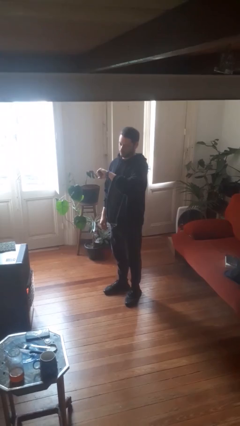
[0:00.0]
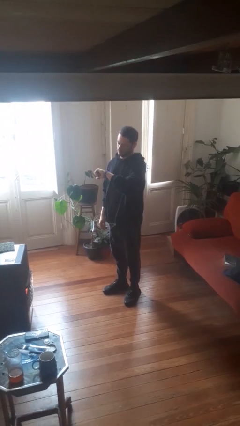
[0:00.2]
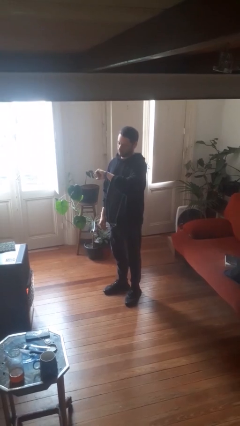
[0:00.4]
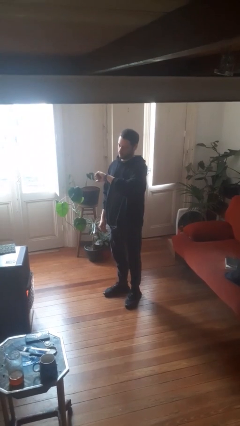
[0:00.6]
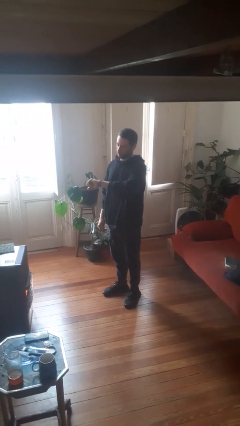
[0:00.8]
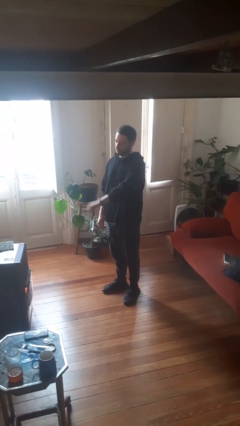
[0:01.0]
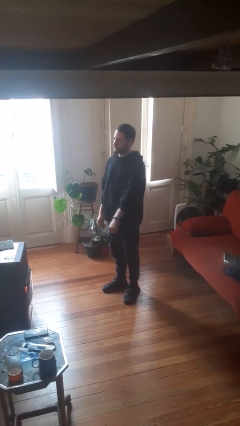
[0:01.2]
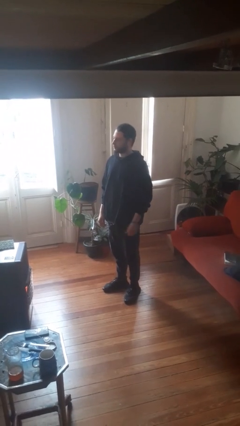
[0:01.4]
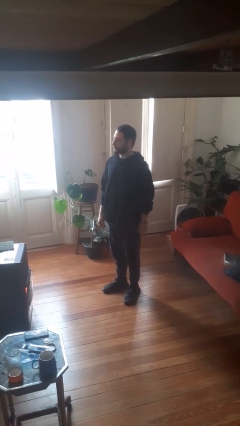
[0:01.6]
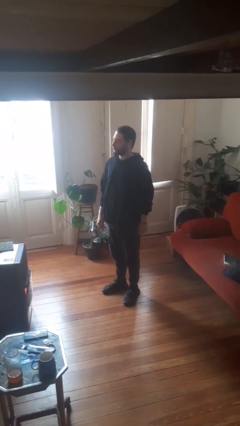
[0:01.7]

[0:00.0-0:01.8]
person looks at wristwatch

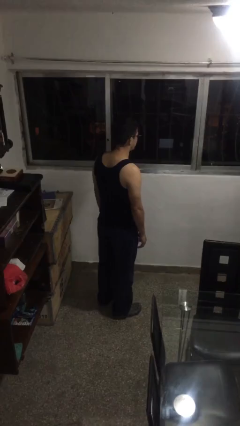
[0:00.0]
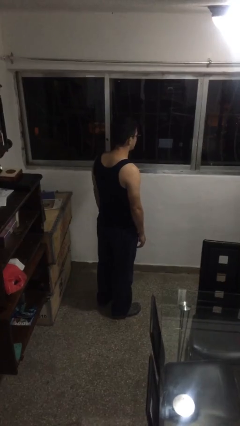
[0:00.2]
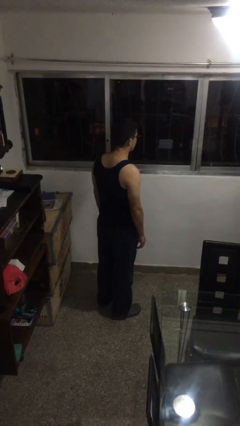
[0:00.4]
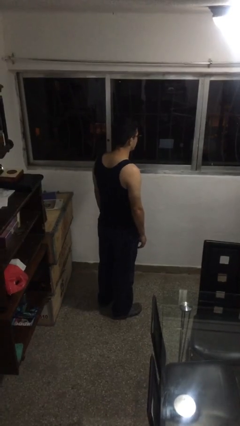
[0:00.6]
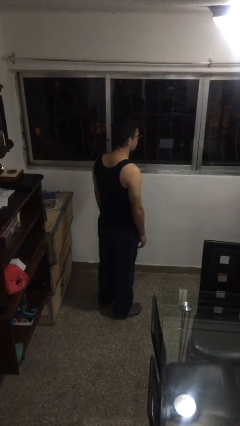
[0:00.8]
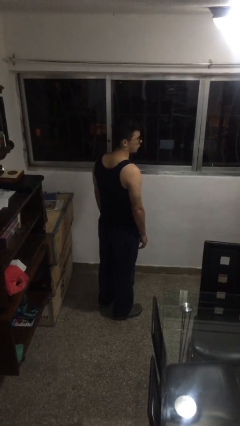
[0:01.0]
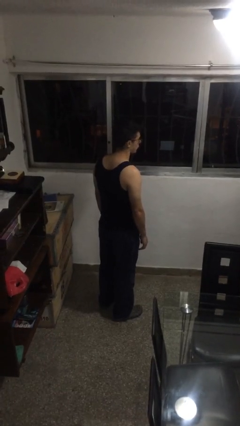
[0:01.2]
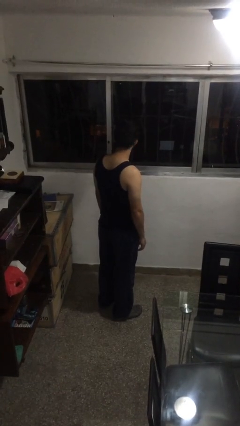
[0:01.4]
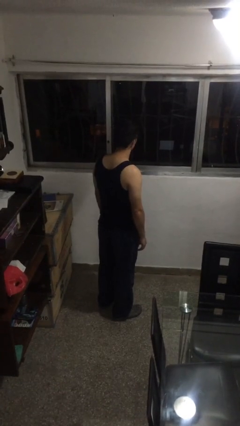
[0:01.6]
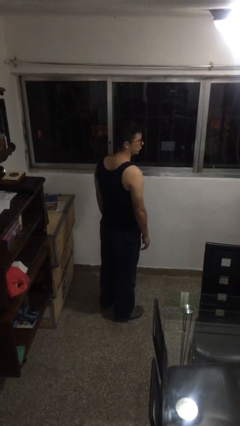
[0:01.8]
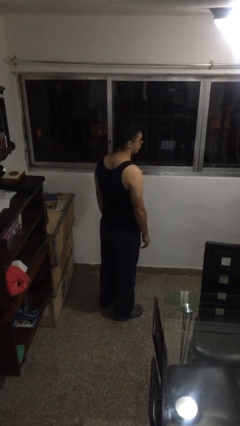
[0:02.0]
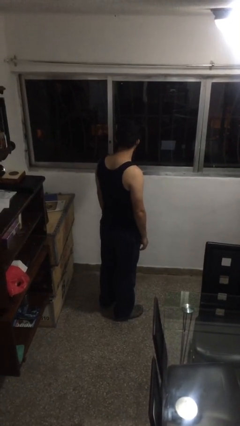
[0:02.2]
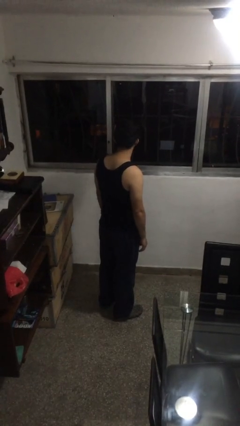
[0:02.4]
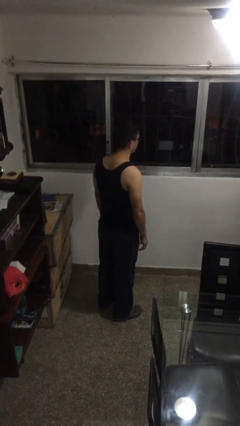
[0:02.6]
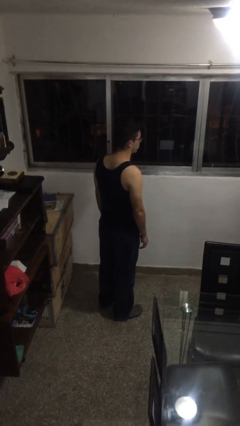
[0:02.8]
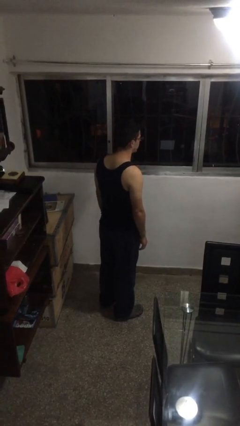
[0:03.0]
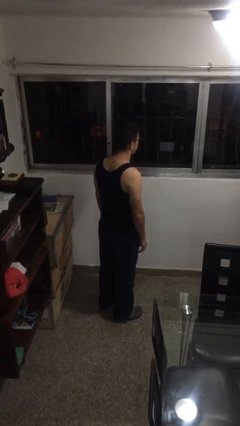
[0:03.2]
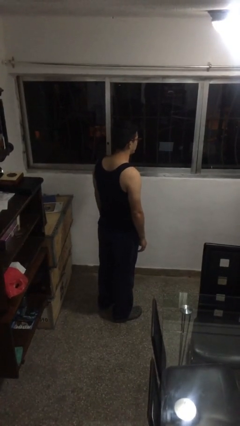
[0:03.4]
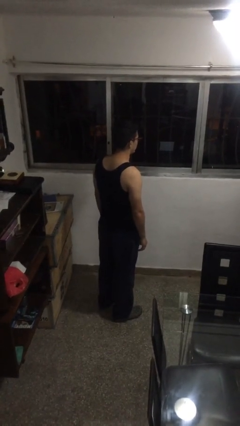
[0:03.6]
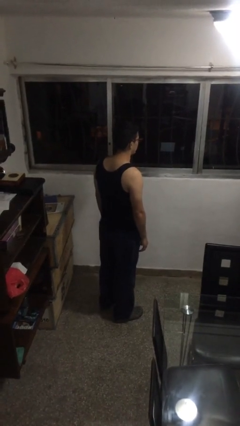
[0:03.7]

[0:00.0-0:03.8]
person shakes head

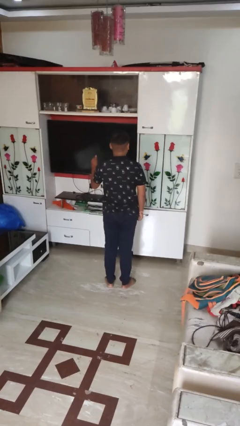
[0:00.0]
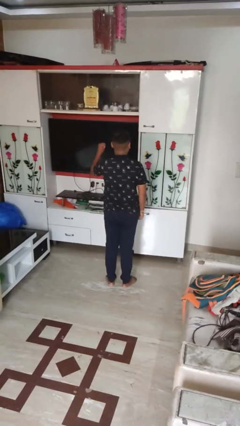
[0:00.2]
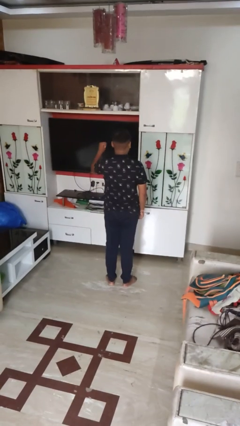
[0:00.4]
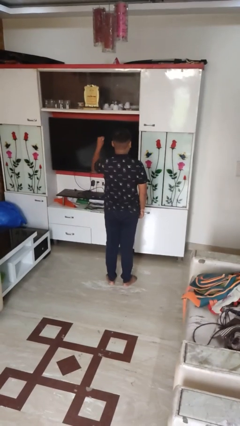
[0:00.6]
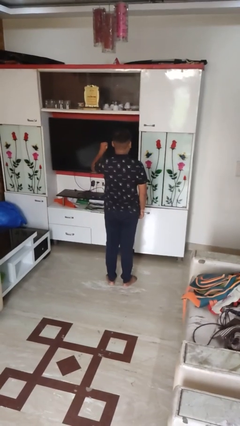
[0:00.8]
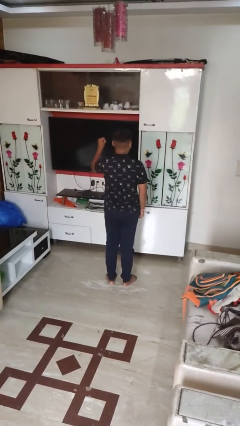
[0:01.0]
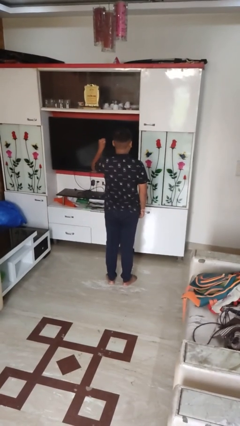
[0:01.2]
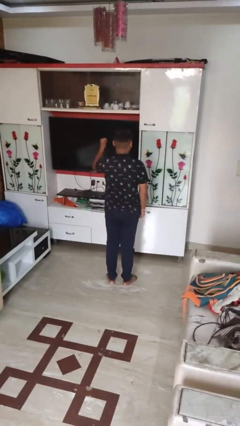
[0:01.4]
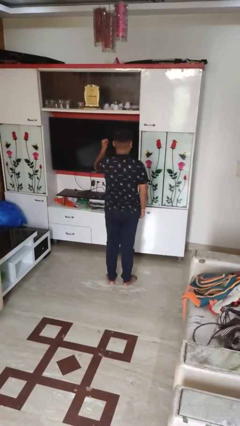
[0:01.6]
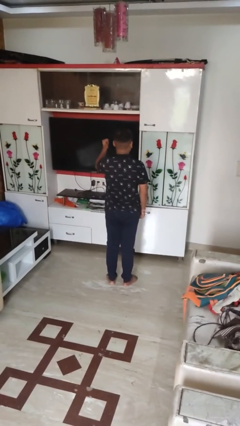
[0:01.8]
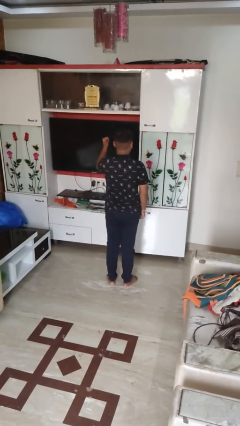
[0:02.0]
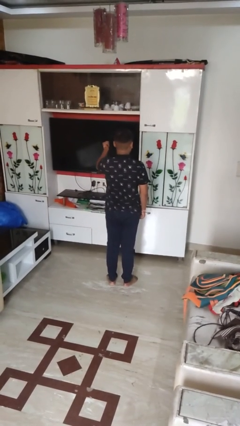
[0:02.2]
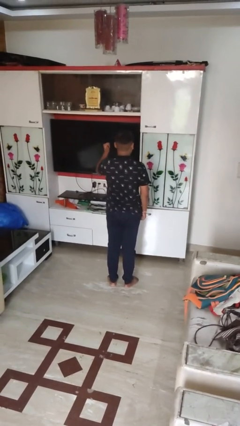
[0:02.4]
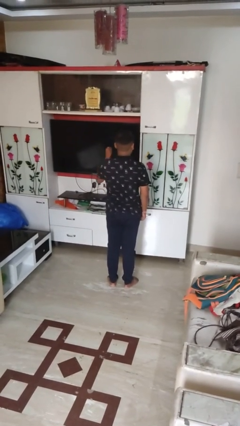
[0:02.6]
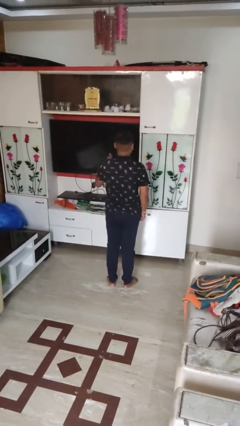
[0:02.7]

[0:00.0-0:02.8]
person gestures behind me

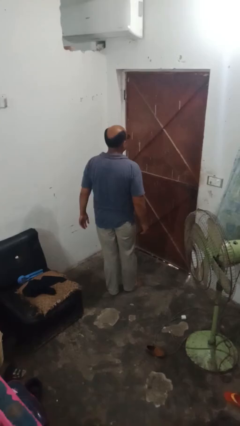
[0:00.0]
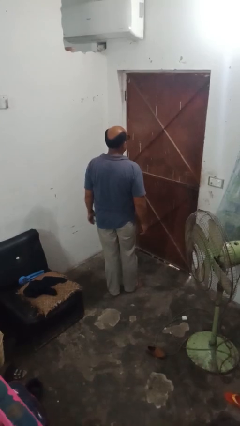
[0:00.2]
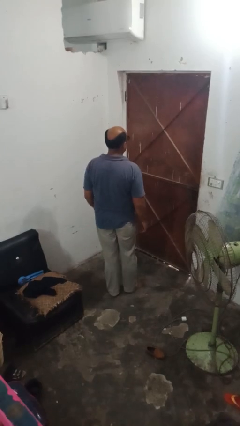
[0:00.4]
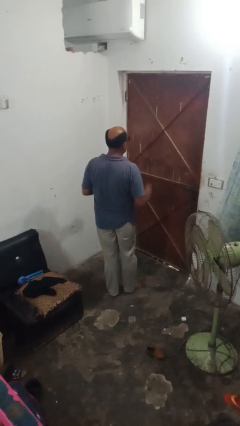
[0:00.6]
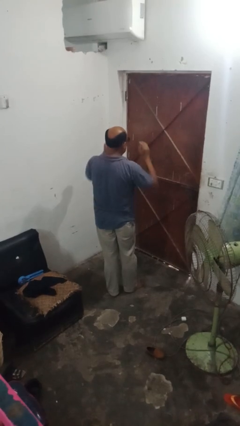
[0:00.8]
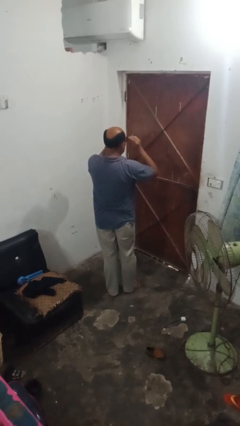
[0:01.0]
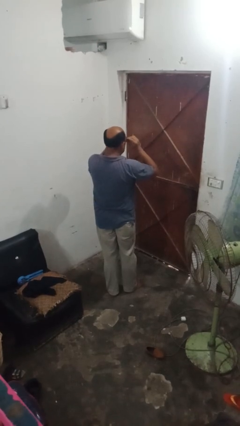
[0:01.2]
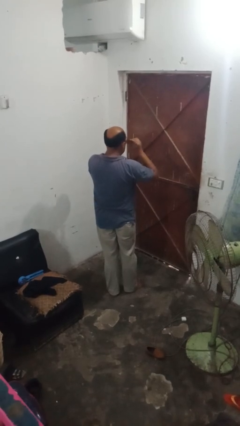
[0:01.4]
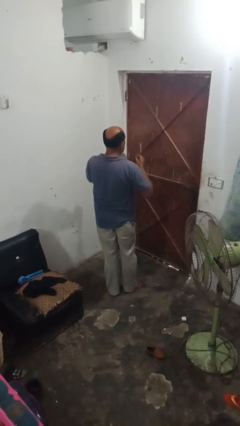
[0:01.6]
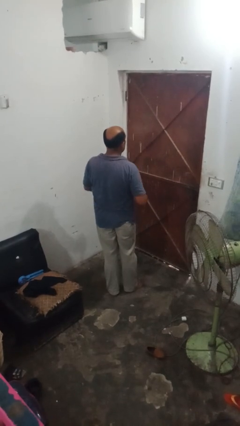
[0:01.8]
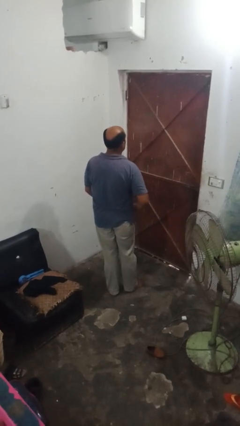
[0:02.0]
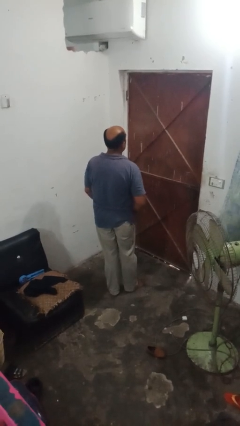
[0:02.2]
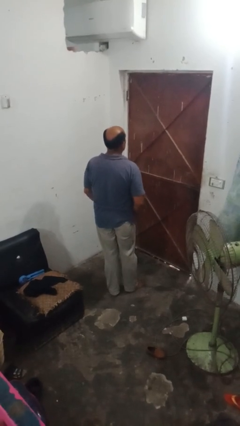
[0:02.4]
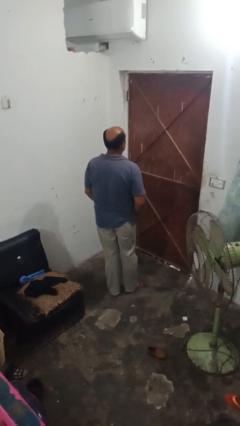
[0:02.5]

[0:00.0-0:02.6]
person takes off sunglasses

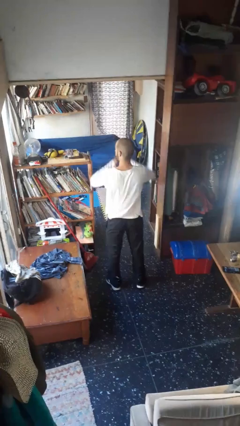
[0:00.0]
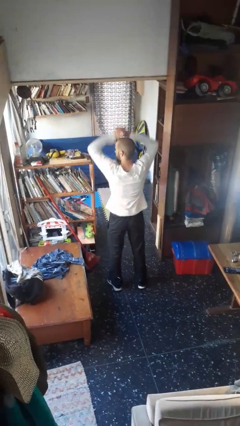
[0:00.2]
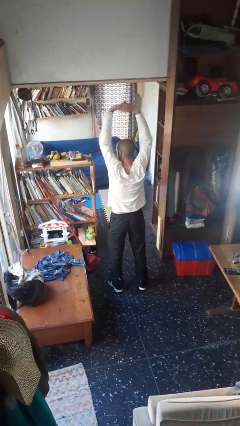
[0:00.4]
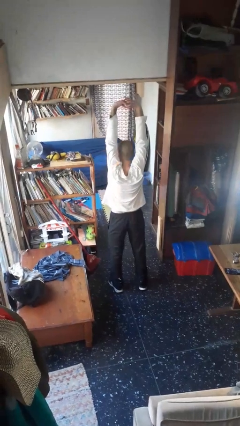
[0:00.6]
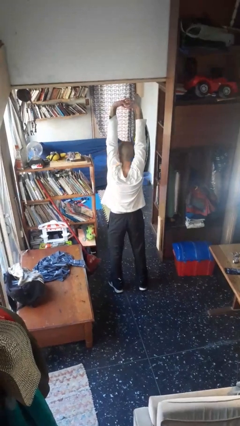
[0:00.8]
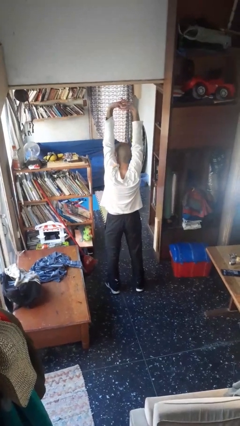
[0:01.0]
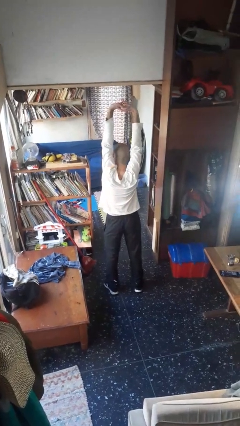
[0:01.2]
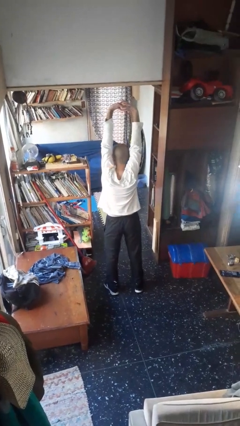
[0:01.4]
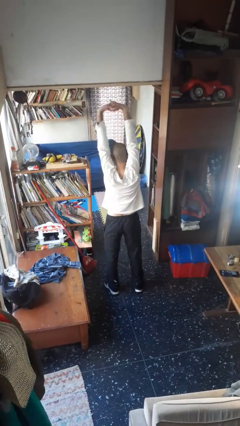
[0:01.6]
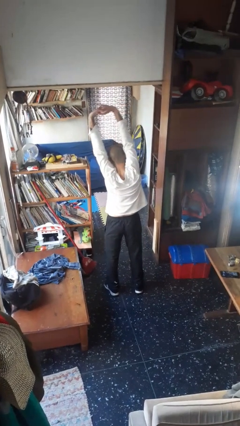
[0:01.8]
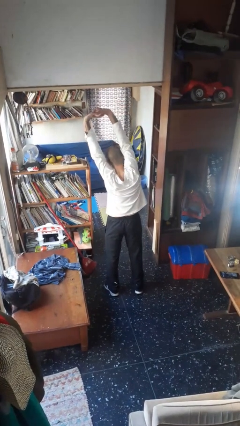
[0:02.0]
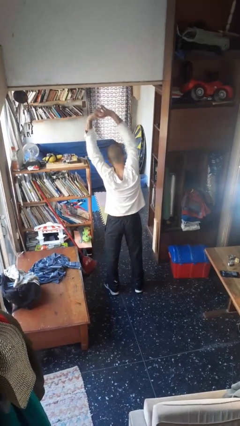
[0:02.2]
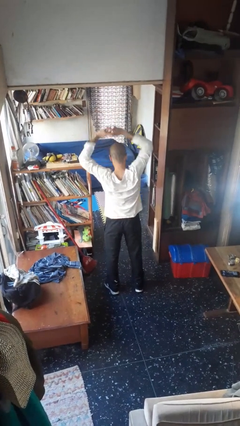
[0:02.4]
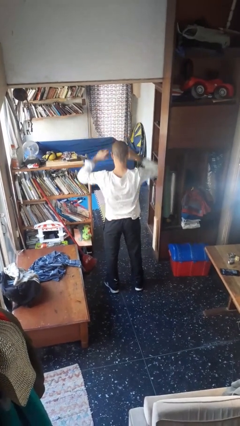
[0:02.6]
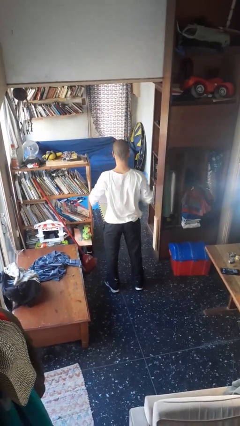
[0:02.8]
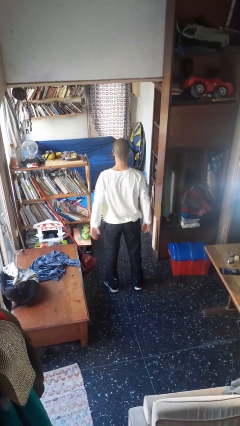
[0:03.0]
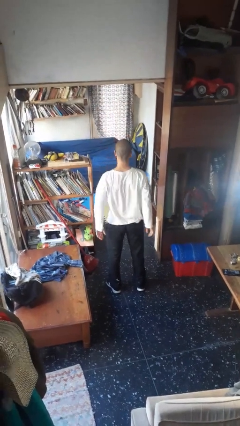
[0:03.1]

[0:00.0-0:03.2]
person stretches arms over head

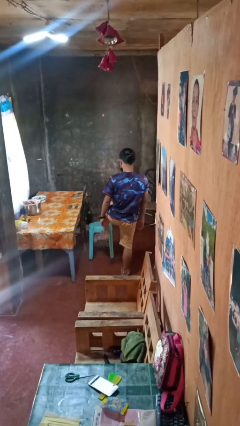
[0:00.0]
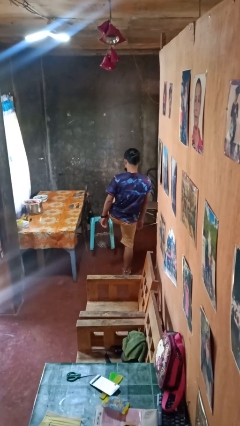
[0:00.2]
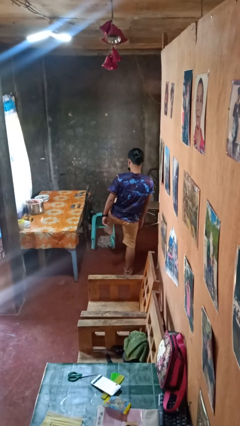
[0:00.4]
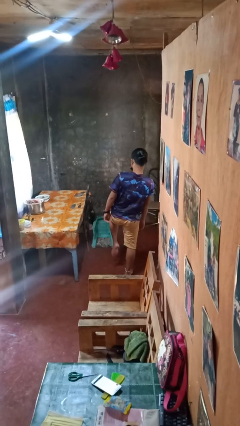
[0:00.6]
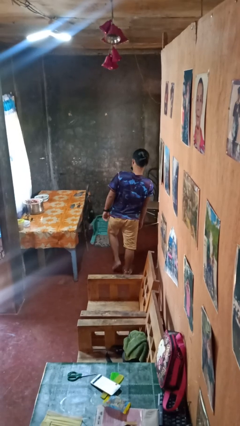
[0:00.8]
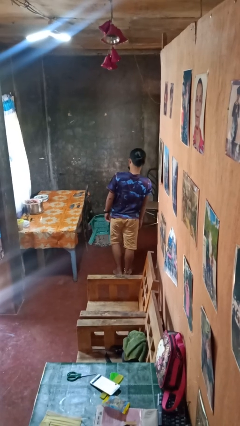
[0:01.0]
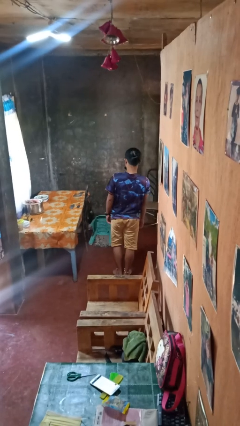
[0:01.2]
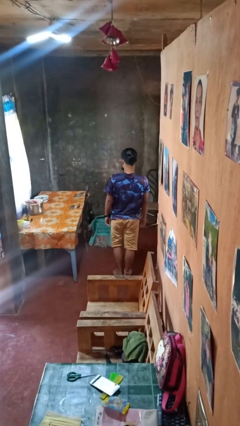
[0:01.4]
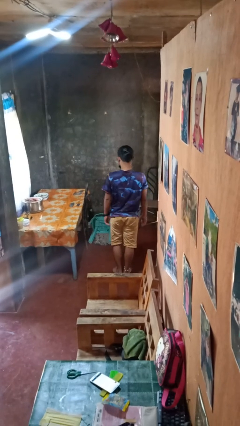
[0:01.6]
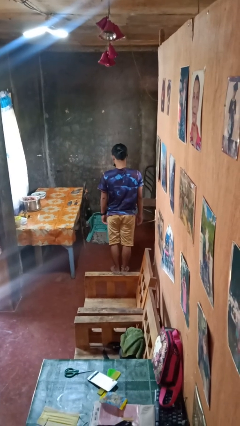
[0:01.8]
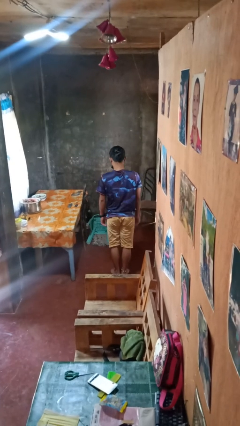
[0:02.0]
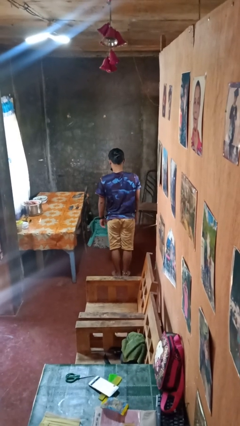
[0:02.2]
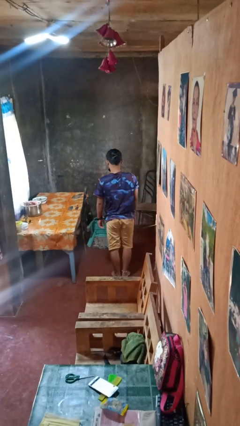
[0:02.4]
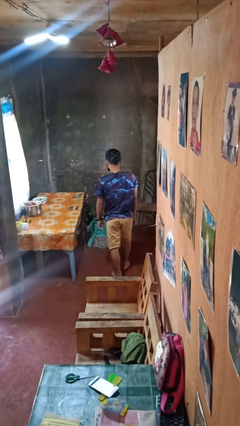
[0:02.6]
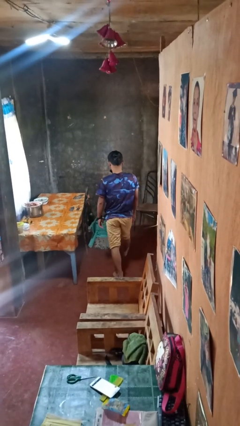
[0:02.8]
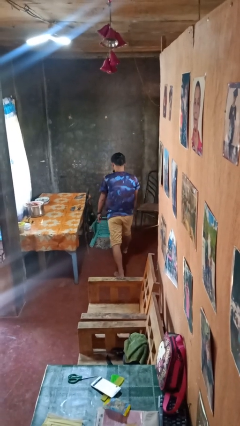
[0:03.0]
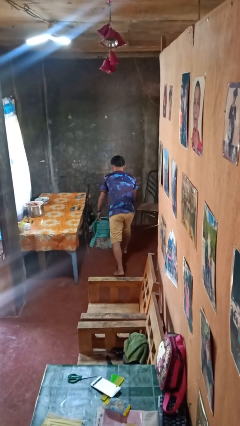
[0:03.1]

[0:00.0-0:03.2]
person knocks over furniture
